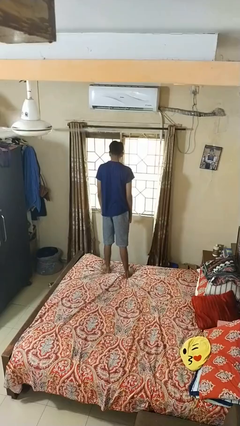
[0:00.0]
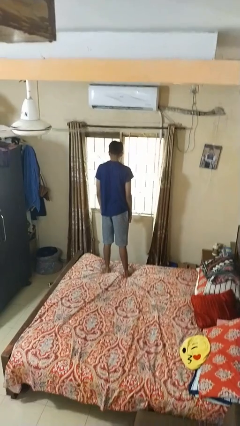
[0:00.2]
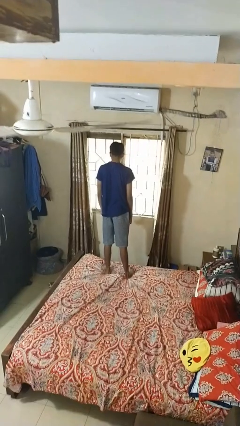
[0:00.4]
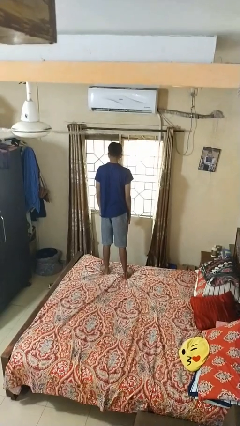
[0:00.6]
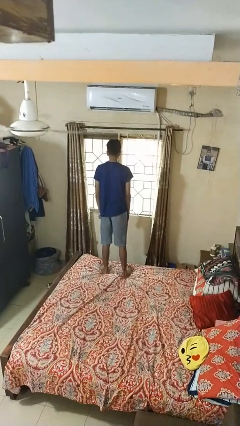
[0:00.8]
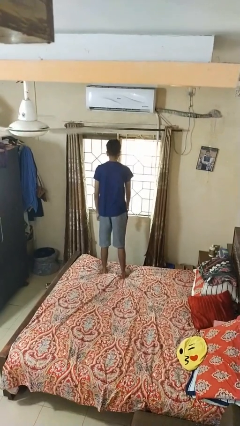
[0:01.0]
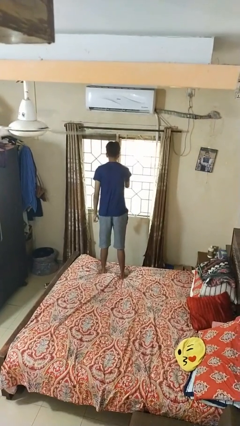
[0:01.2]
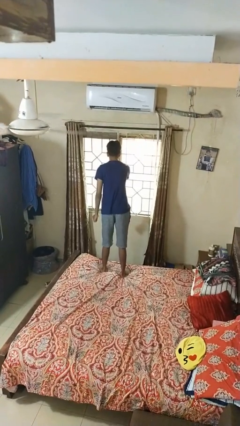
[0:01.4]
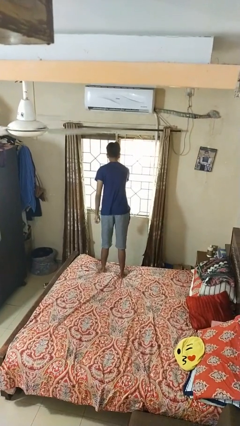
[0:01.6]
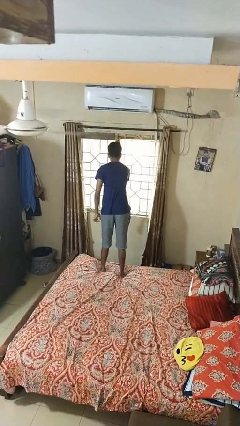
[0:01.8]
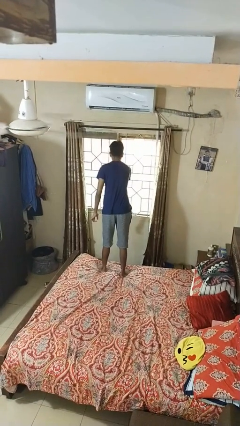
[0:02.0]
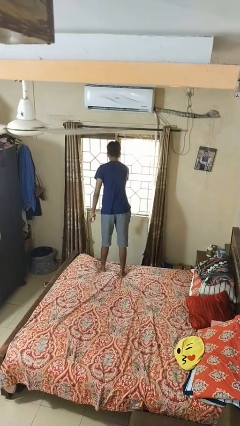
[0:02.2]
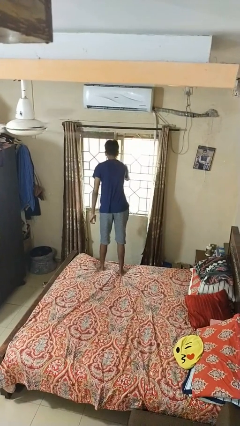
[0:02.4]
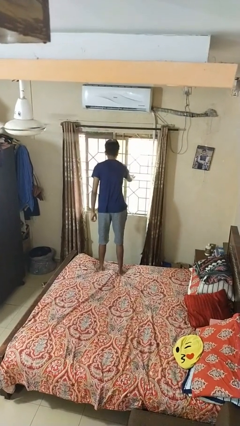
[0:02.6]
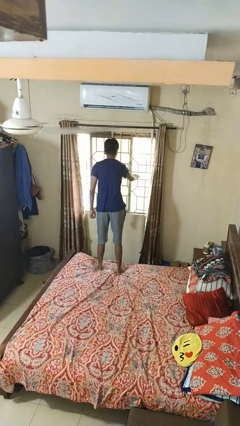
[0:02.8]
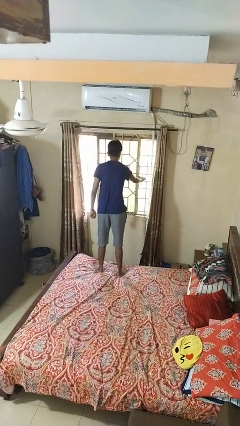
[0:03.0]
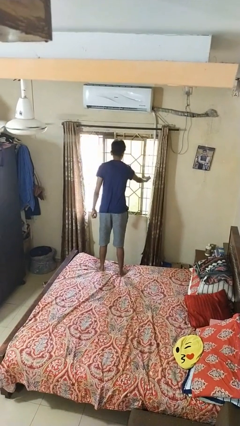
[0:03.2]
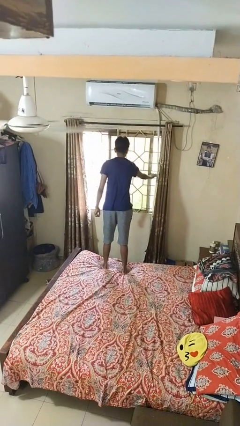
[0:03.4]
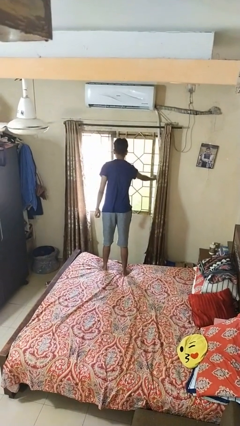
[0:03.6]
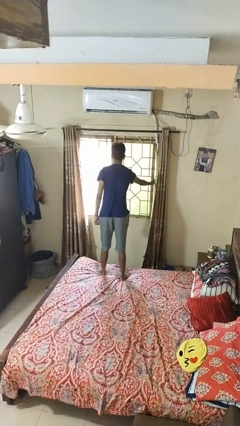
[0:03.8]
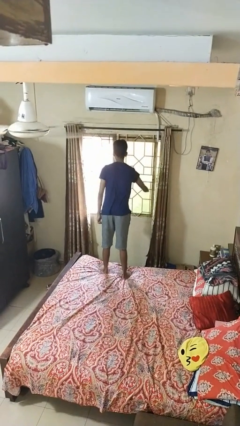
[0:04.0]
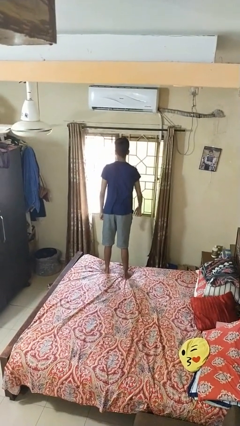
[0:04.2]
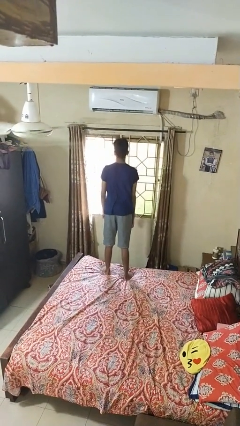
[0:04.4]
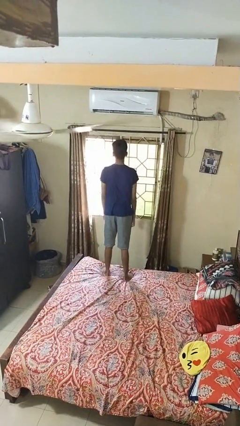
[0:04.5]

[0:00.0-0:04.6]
person opens home window

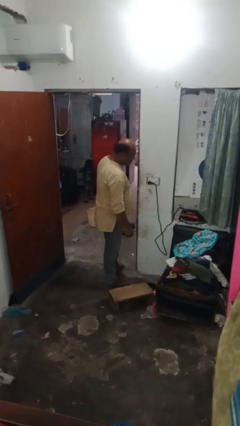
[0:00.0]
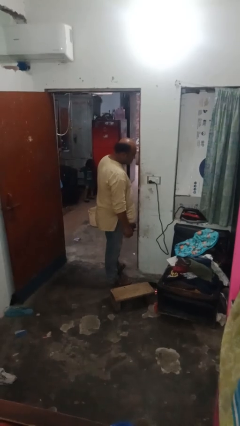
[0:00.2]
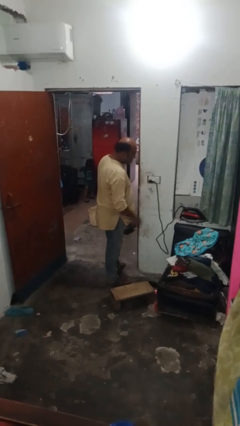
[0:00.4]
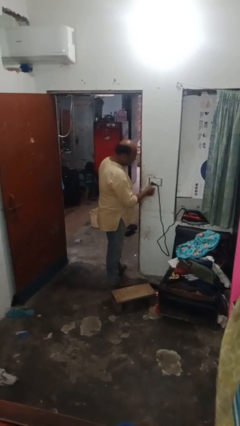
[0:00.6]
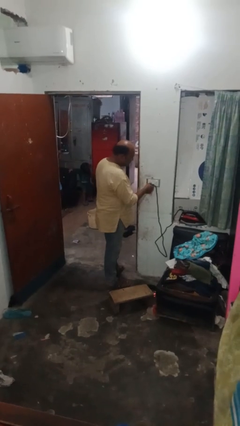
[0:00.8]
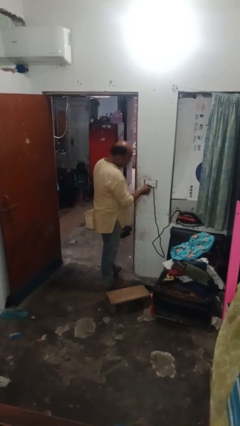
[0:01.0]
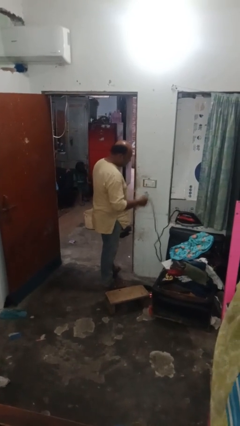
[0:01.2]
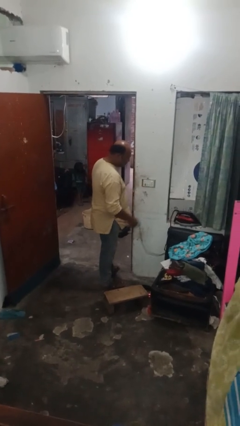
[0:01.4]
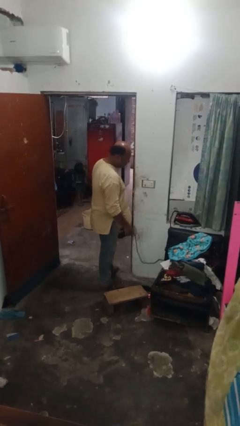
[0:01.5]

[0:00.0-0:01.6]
person unplugs from electrical socket

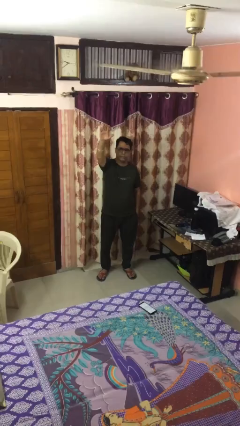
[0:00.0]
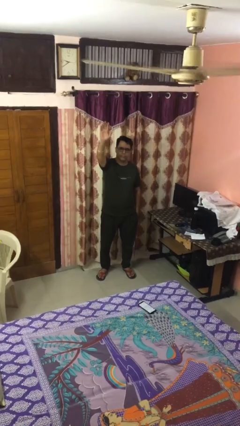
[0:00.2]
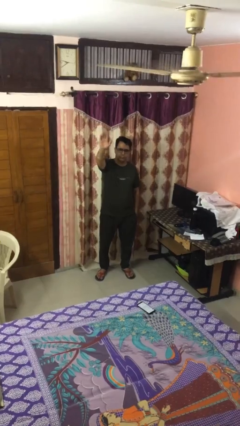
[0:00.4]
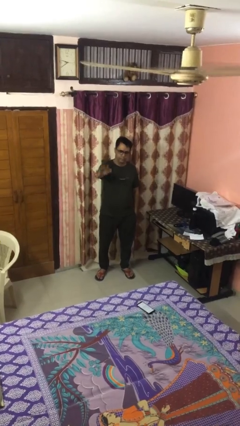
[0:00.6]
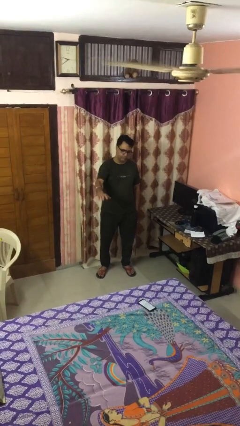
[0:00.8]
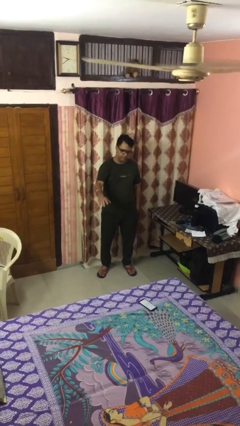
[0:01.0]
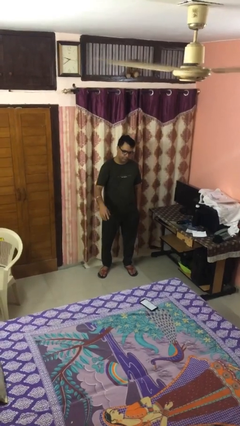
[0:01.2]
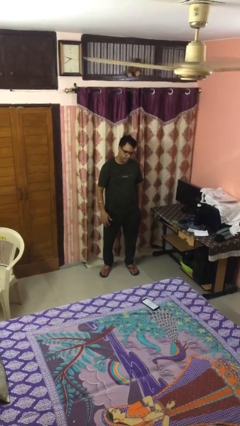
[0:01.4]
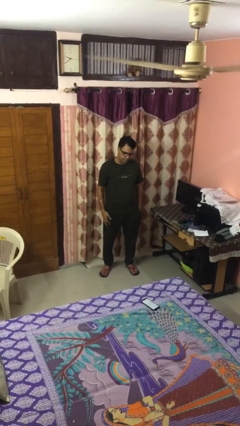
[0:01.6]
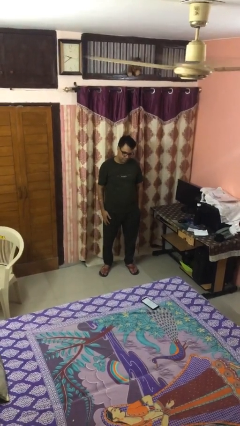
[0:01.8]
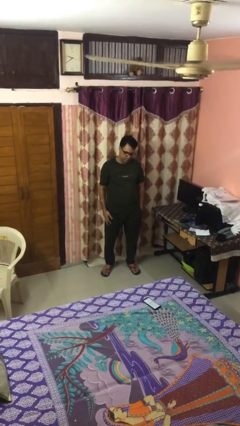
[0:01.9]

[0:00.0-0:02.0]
person gestures swipe down

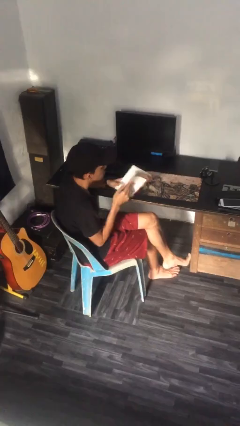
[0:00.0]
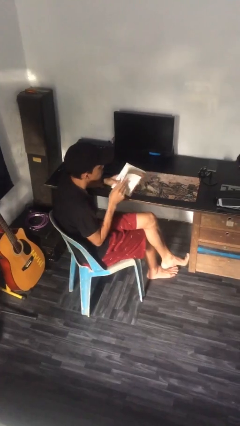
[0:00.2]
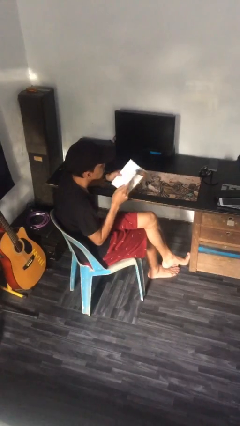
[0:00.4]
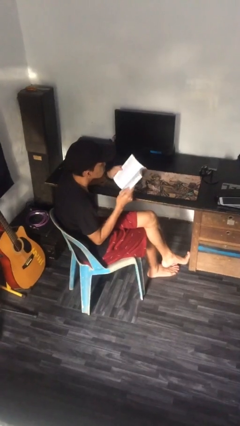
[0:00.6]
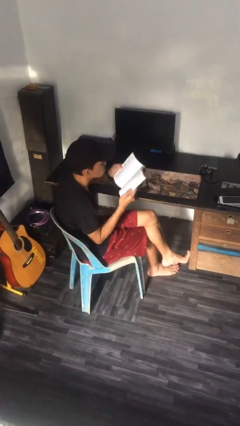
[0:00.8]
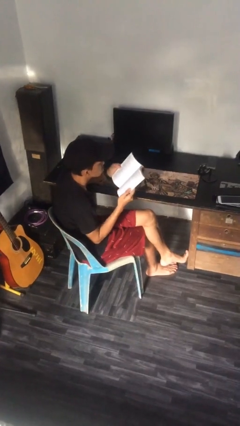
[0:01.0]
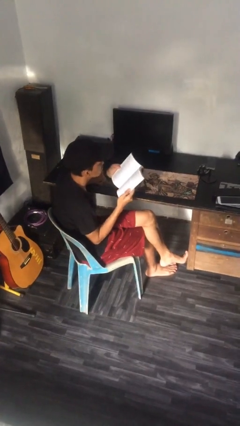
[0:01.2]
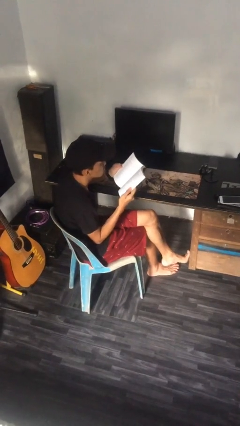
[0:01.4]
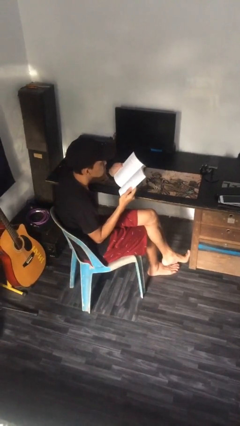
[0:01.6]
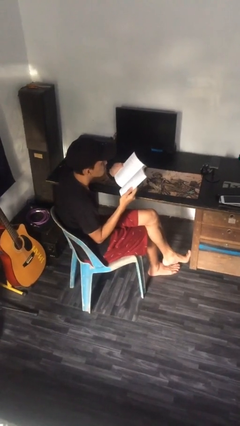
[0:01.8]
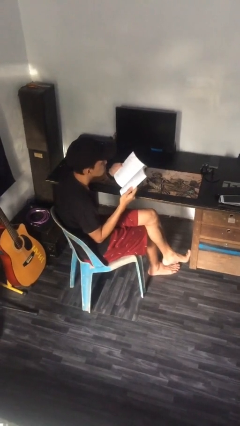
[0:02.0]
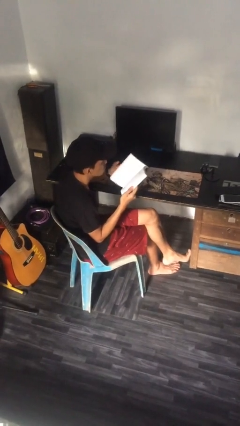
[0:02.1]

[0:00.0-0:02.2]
person reads document

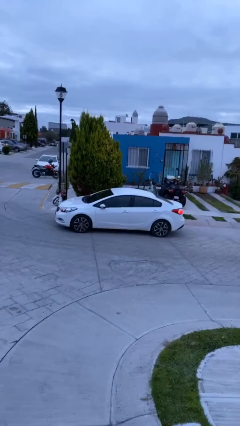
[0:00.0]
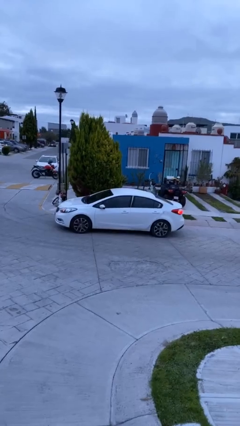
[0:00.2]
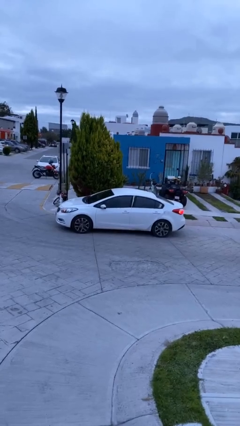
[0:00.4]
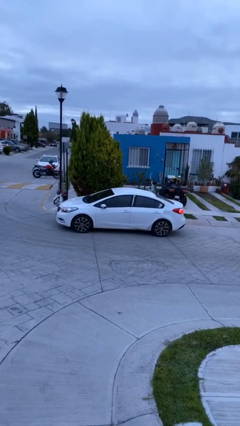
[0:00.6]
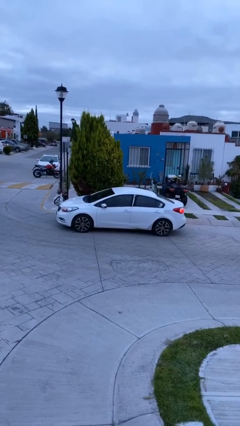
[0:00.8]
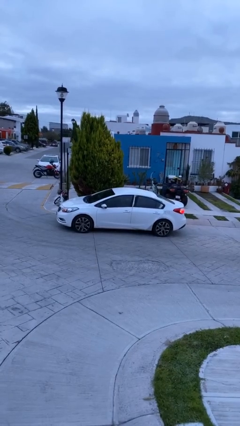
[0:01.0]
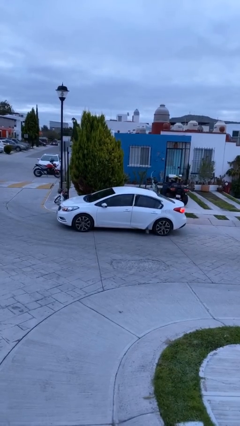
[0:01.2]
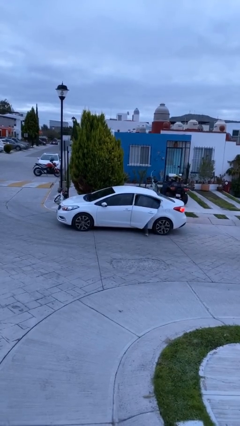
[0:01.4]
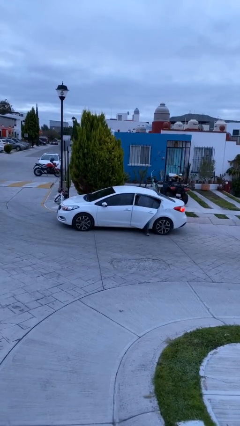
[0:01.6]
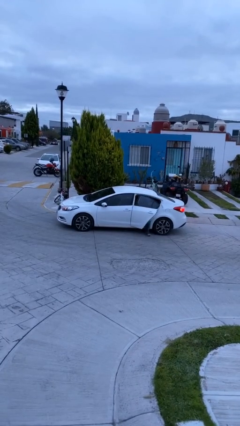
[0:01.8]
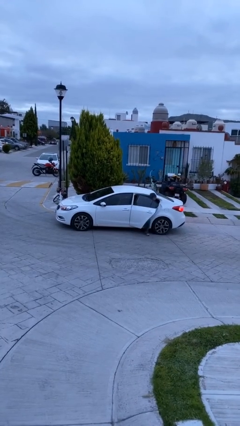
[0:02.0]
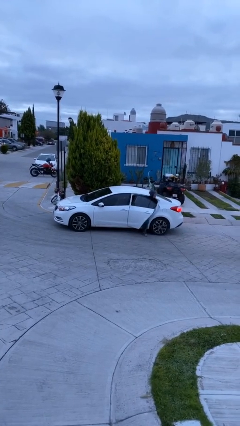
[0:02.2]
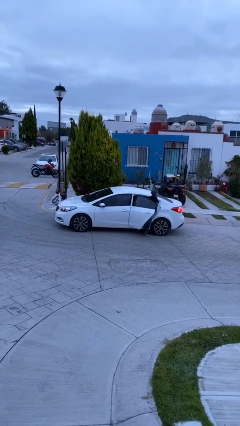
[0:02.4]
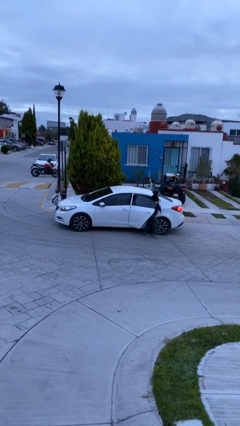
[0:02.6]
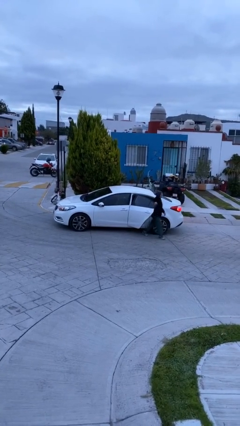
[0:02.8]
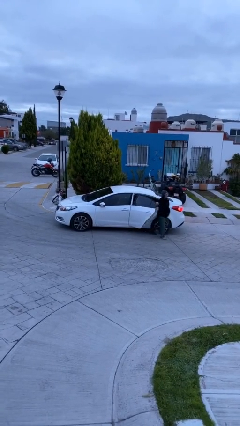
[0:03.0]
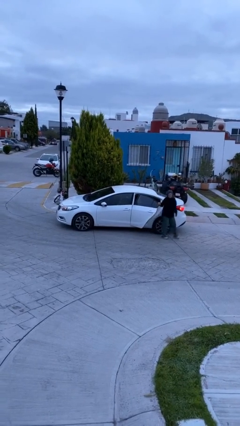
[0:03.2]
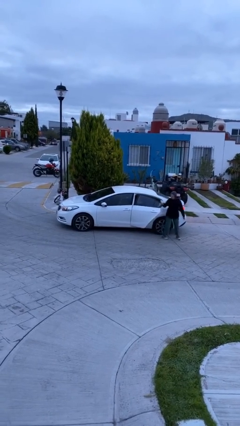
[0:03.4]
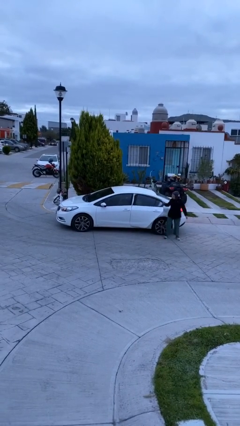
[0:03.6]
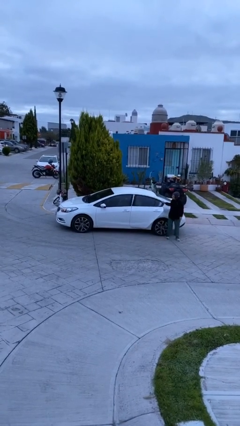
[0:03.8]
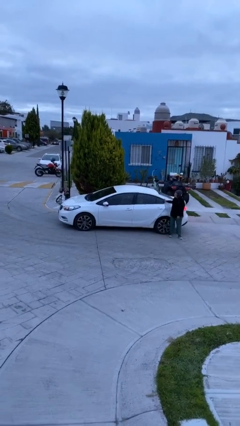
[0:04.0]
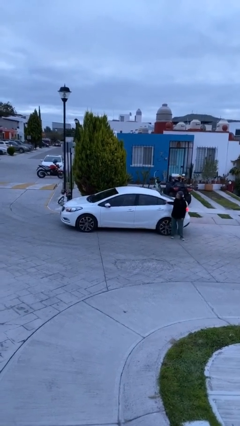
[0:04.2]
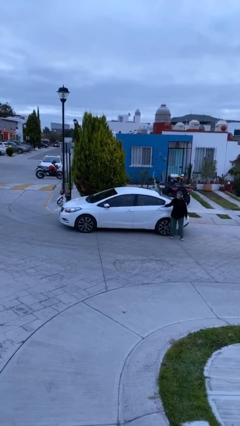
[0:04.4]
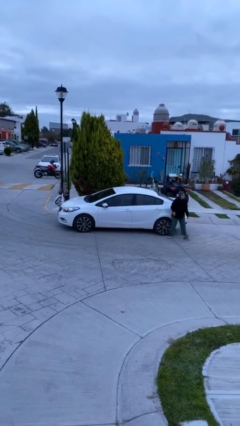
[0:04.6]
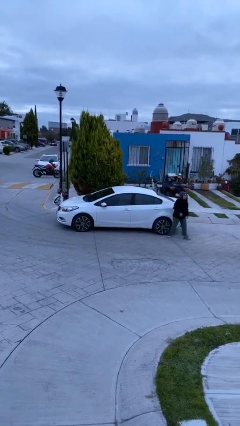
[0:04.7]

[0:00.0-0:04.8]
car drops off person

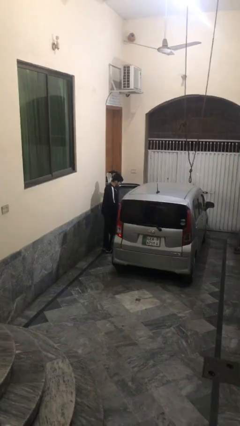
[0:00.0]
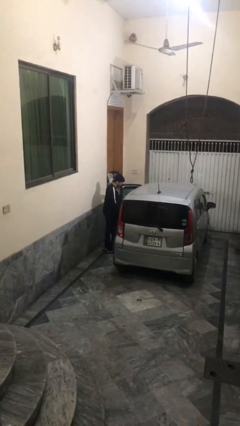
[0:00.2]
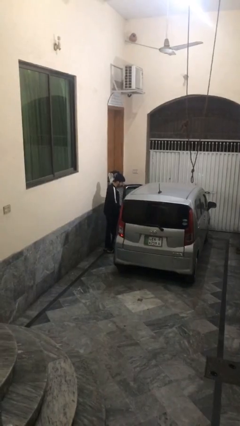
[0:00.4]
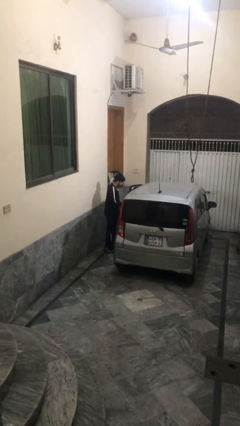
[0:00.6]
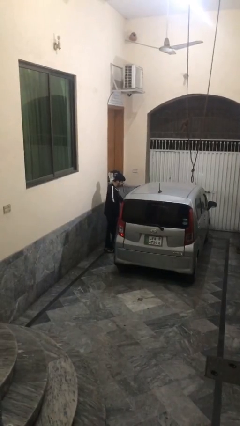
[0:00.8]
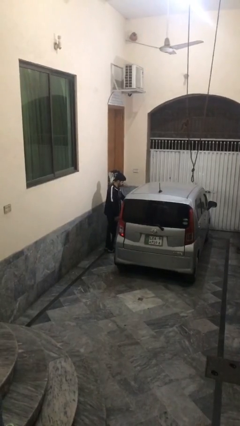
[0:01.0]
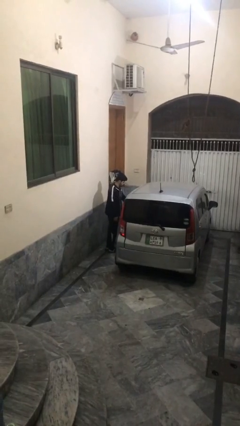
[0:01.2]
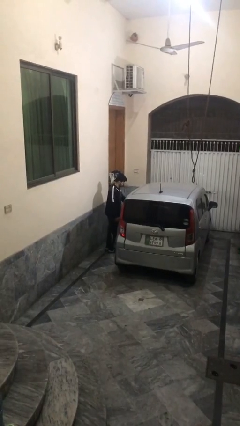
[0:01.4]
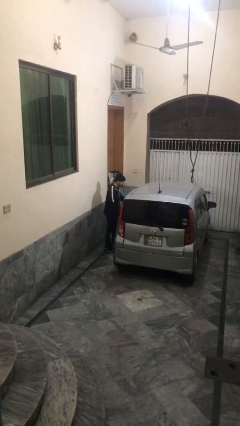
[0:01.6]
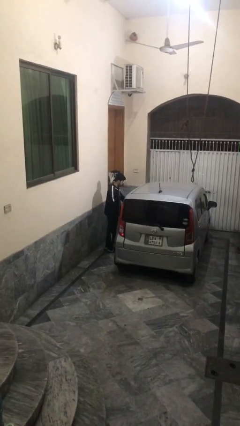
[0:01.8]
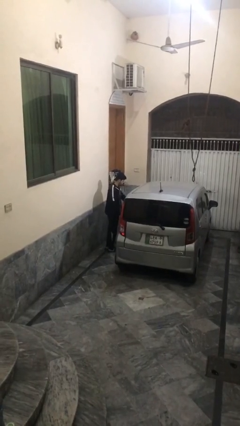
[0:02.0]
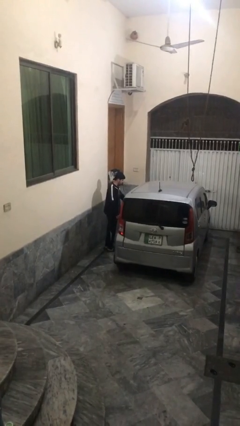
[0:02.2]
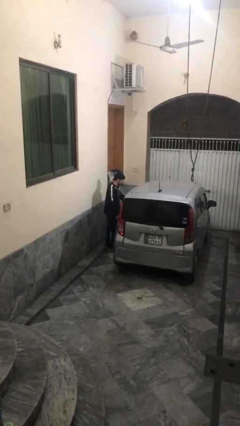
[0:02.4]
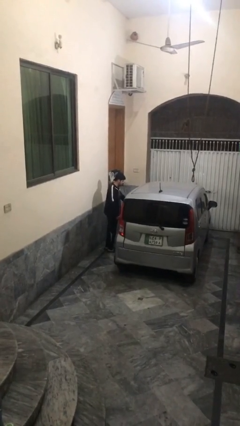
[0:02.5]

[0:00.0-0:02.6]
person closes car door
